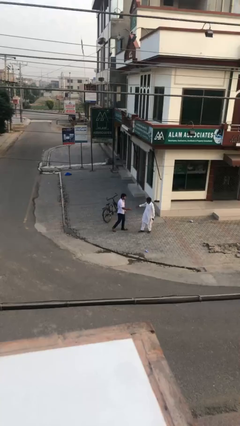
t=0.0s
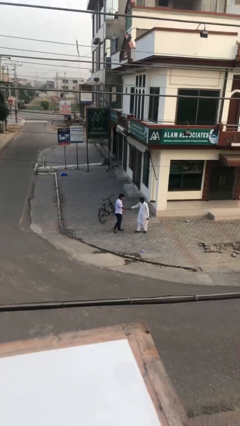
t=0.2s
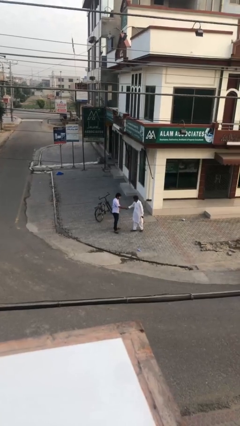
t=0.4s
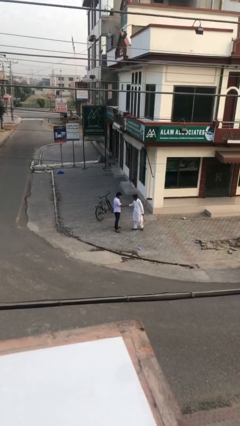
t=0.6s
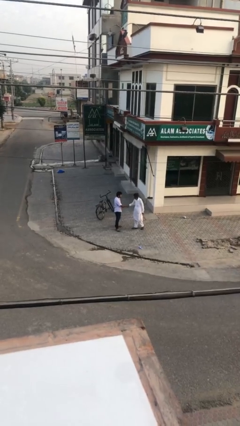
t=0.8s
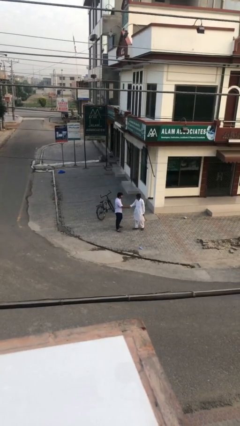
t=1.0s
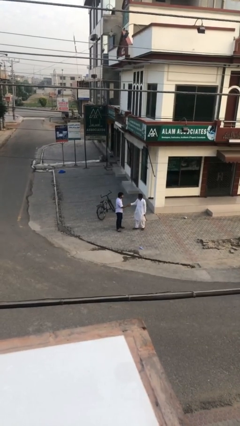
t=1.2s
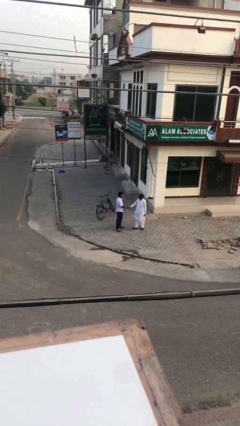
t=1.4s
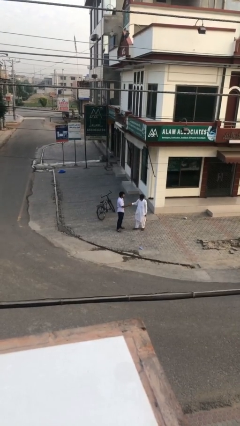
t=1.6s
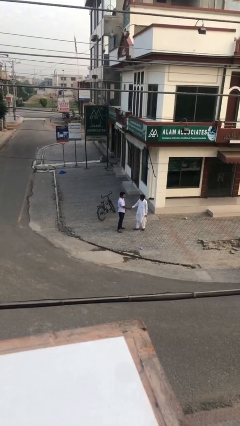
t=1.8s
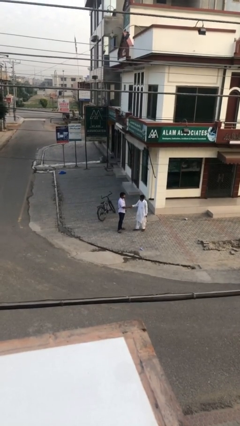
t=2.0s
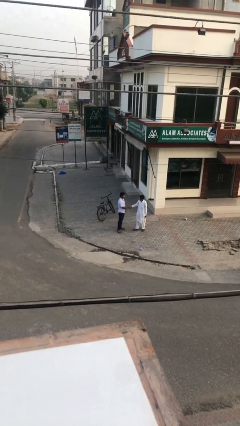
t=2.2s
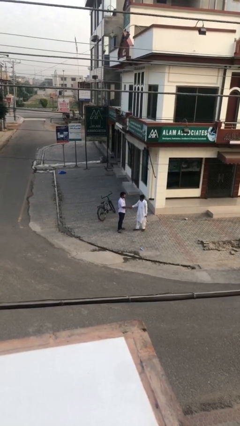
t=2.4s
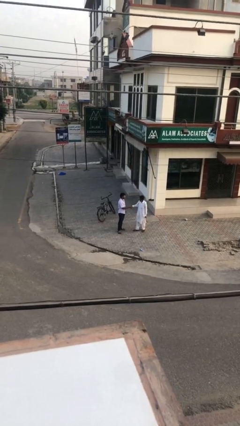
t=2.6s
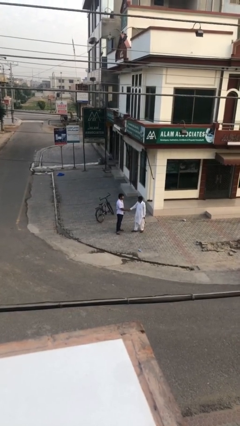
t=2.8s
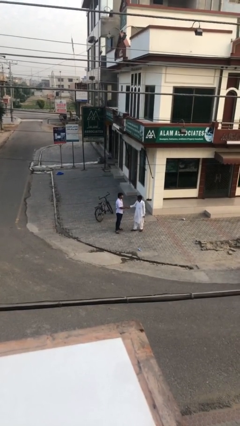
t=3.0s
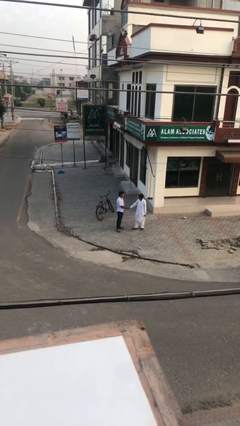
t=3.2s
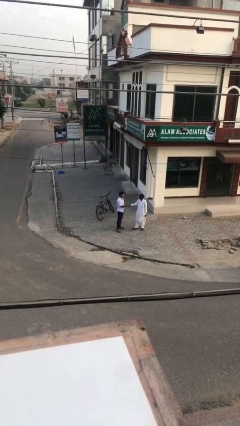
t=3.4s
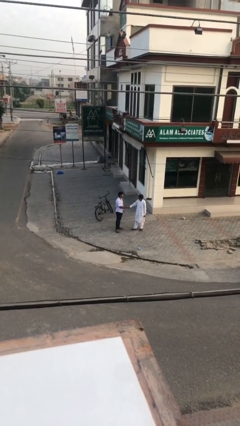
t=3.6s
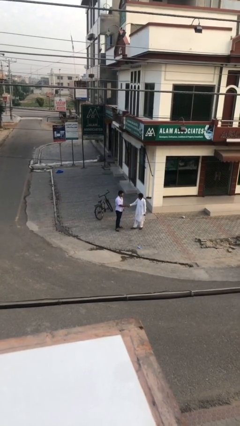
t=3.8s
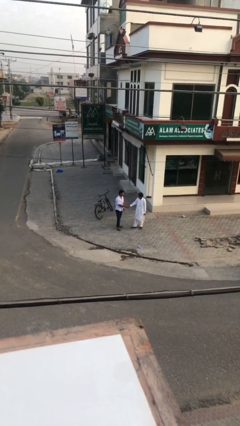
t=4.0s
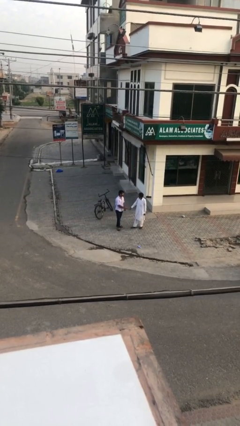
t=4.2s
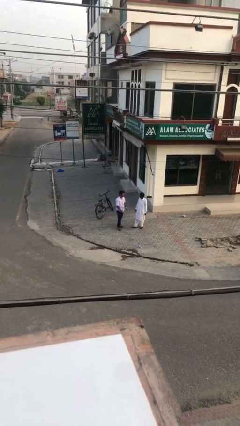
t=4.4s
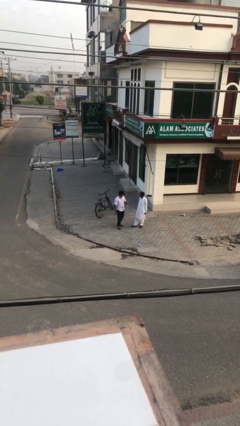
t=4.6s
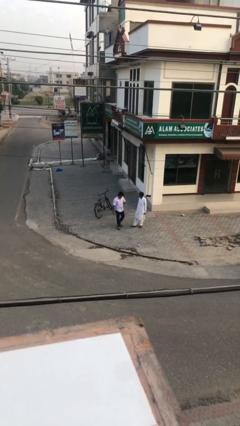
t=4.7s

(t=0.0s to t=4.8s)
person shakes hand

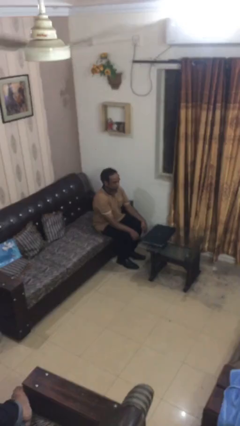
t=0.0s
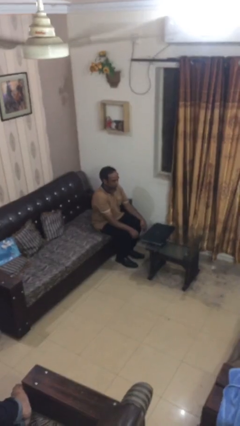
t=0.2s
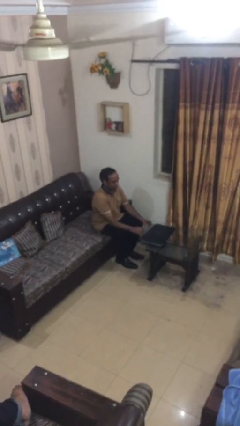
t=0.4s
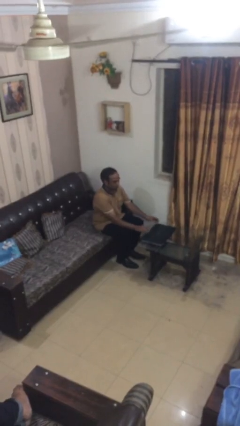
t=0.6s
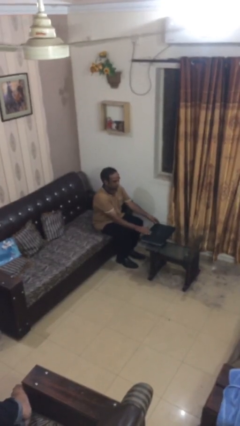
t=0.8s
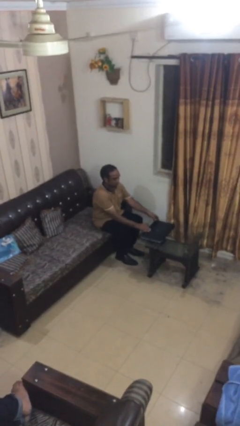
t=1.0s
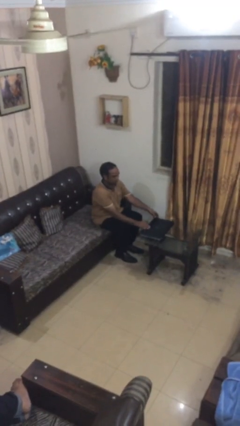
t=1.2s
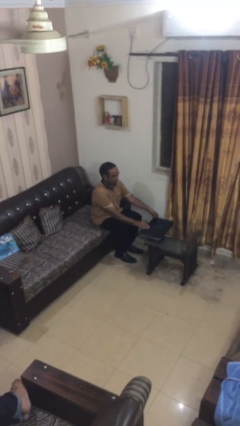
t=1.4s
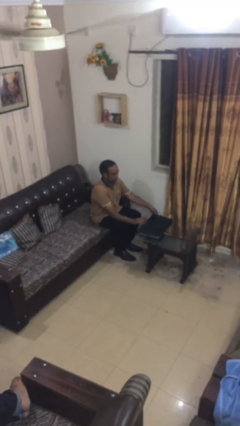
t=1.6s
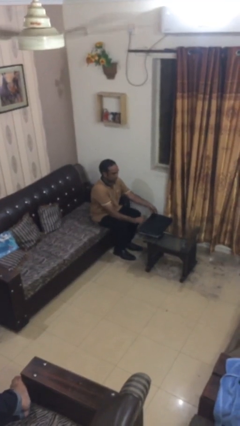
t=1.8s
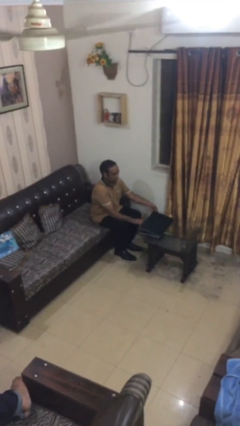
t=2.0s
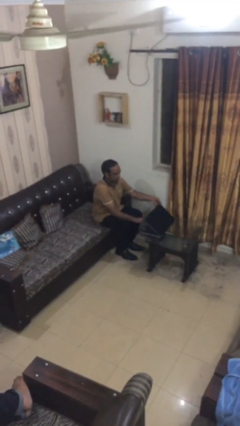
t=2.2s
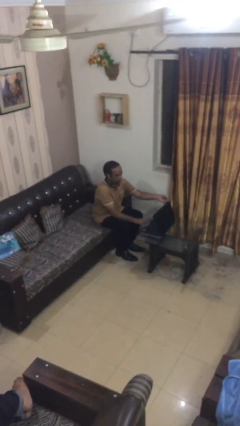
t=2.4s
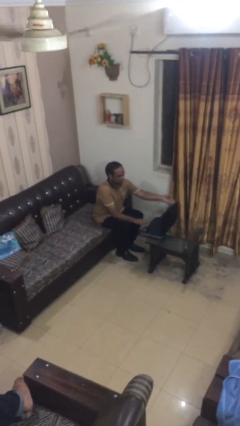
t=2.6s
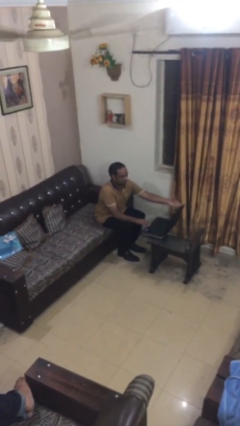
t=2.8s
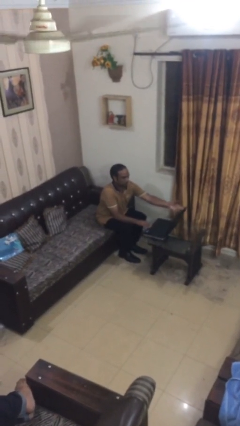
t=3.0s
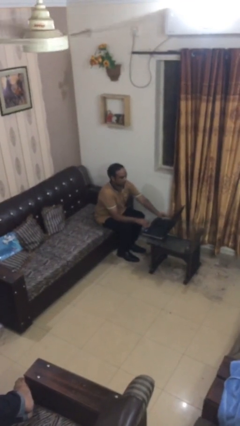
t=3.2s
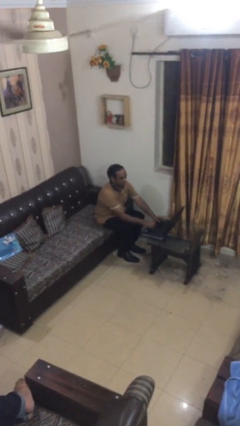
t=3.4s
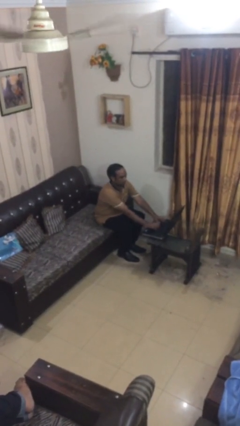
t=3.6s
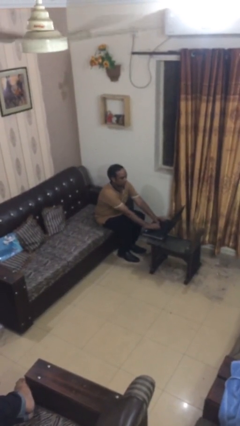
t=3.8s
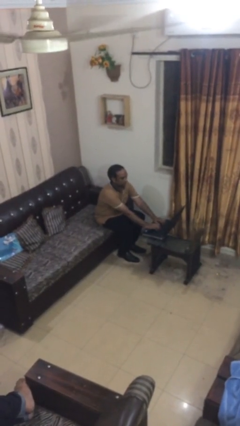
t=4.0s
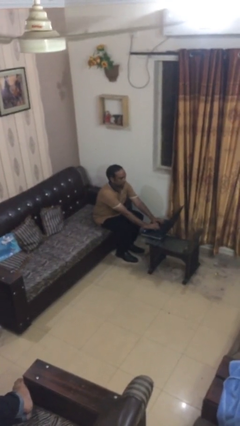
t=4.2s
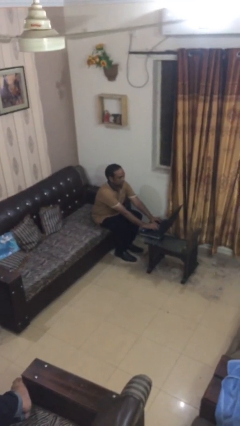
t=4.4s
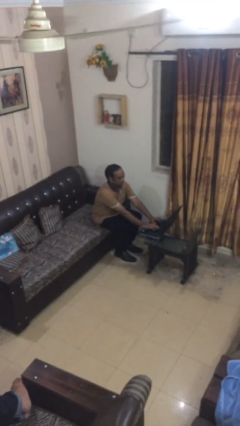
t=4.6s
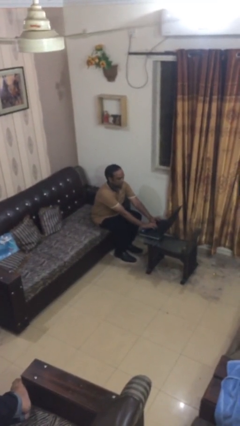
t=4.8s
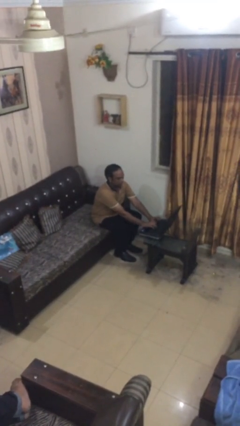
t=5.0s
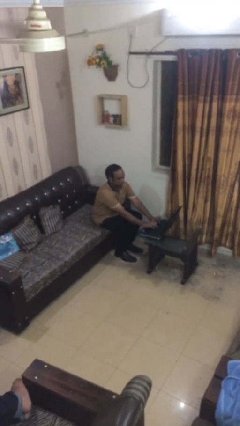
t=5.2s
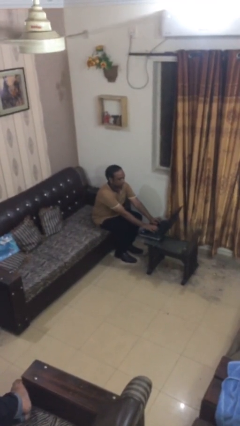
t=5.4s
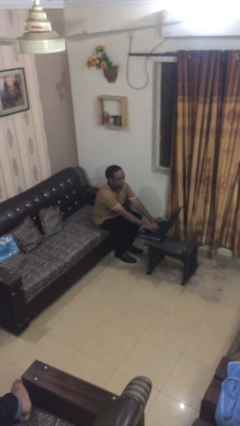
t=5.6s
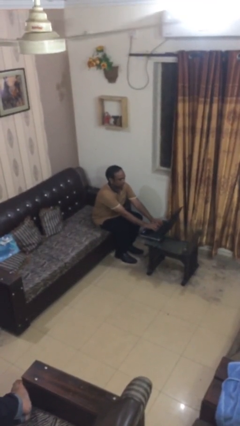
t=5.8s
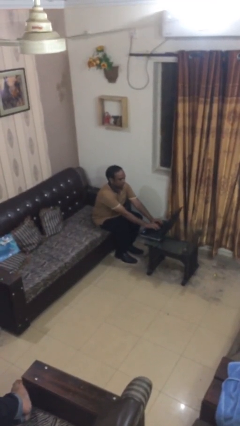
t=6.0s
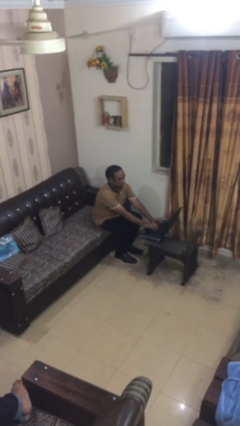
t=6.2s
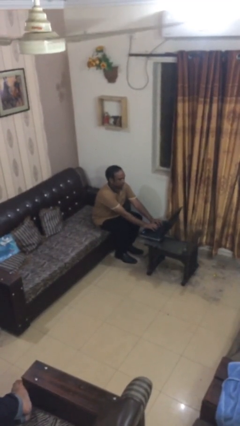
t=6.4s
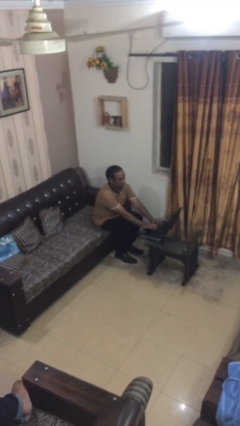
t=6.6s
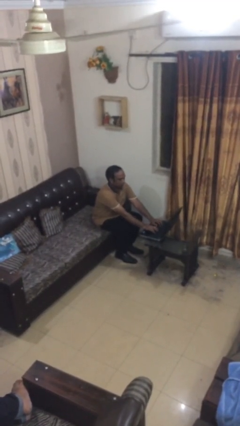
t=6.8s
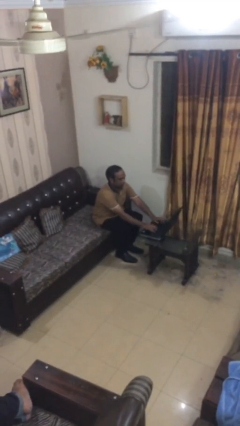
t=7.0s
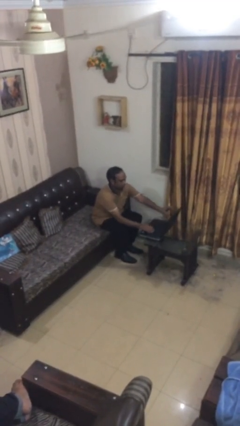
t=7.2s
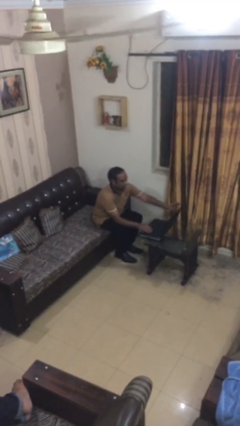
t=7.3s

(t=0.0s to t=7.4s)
person interacts with laptop

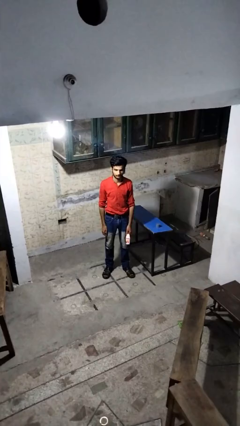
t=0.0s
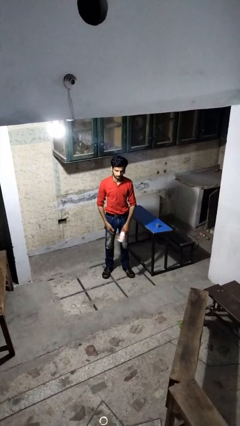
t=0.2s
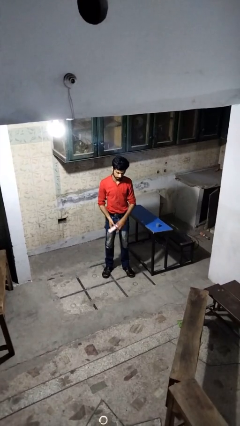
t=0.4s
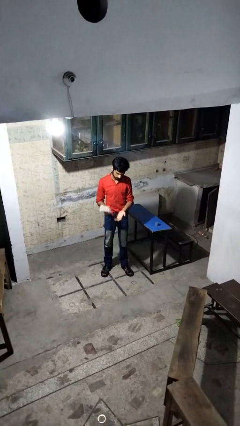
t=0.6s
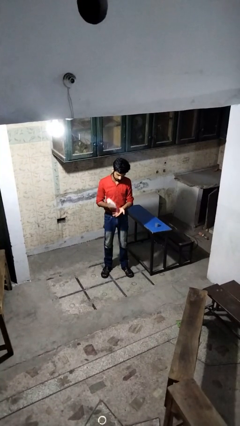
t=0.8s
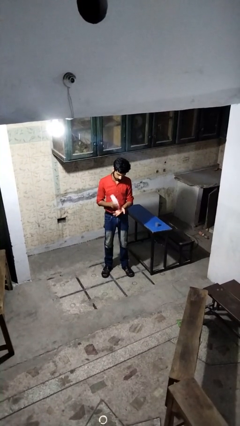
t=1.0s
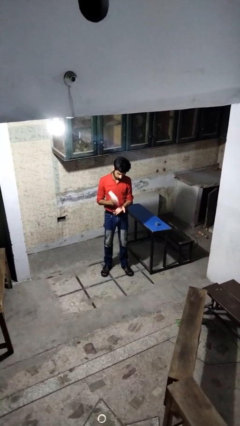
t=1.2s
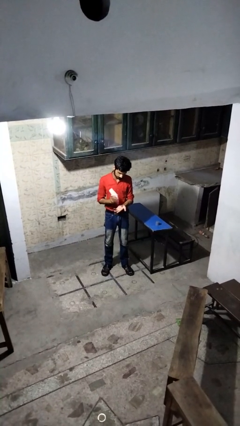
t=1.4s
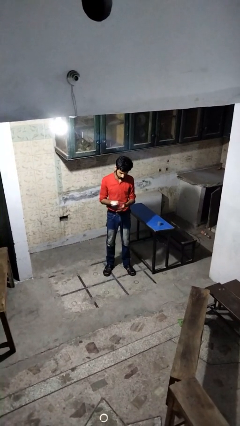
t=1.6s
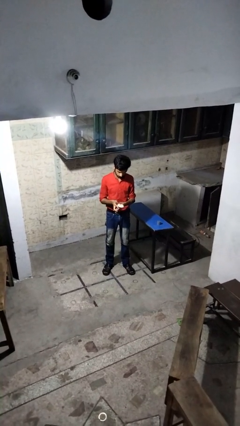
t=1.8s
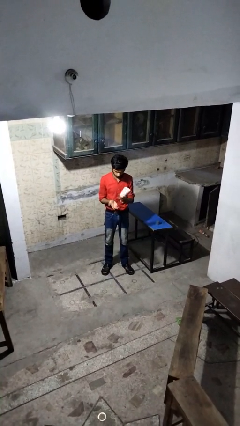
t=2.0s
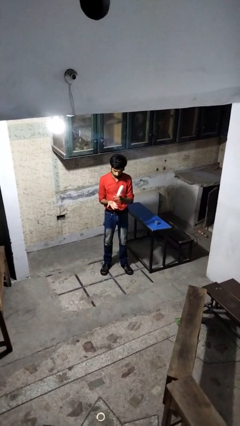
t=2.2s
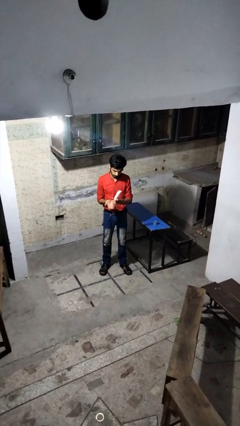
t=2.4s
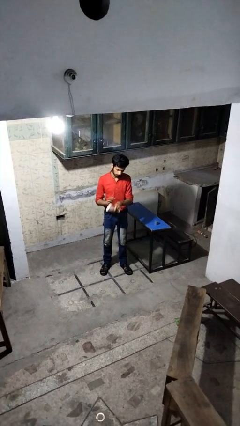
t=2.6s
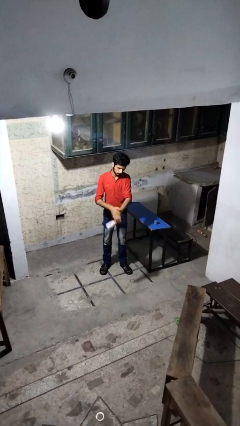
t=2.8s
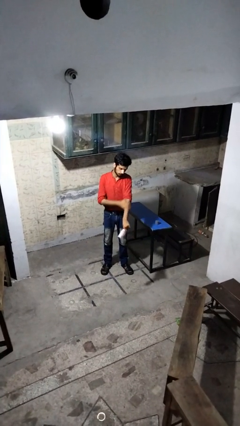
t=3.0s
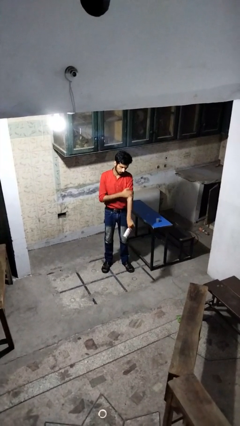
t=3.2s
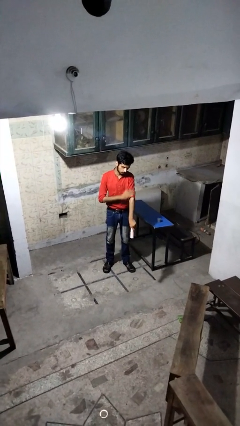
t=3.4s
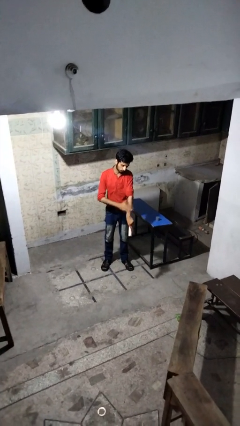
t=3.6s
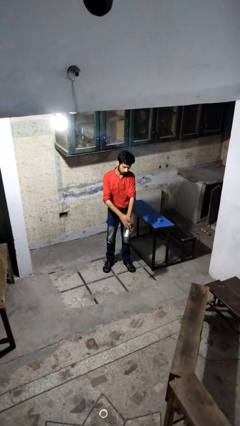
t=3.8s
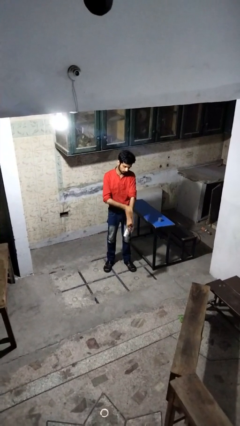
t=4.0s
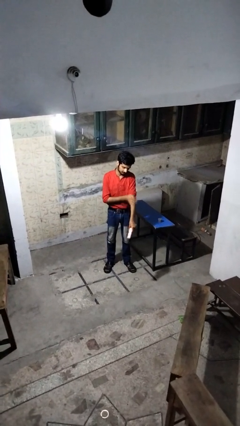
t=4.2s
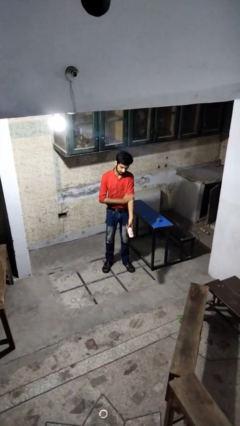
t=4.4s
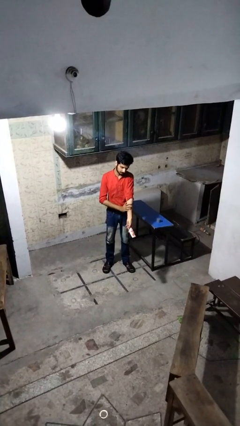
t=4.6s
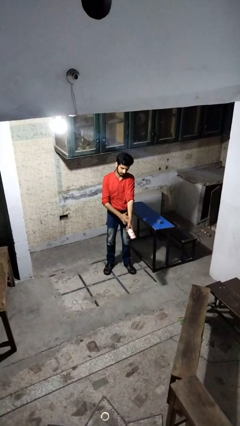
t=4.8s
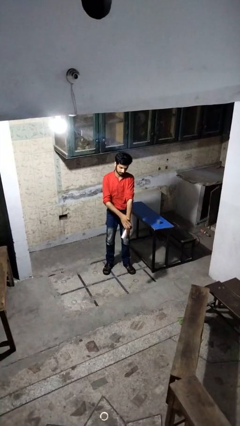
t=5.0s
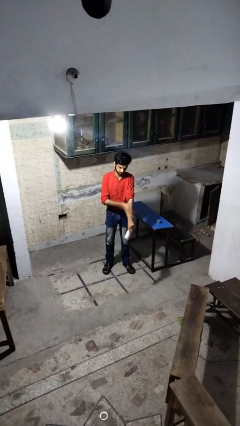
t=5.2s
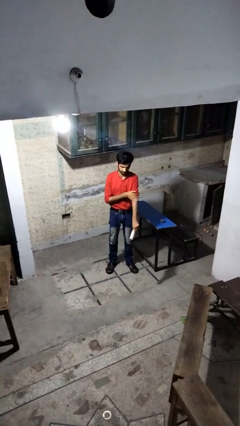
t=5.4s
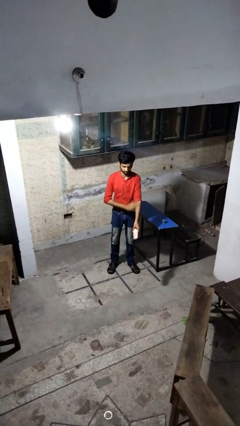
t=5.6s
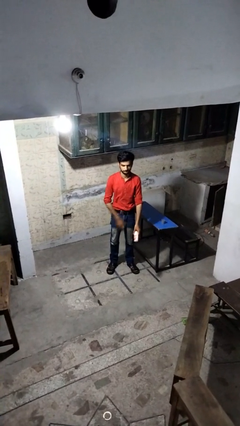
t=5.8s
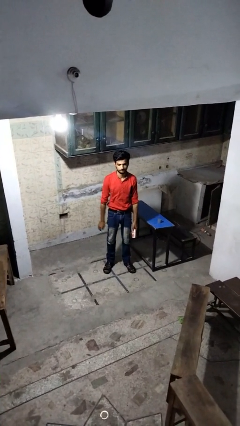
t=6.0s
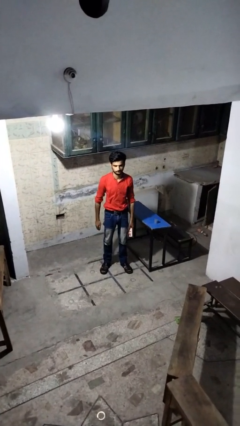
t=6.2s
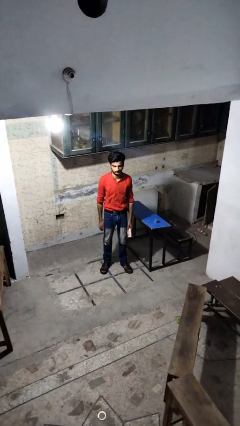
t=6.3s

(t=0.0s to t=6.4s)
person applies sunscreen
